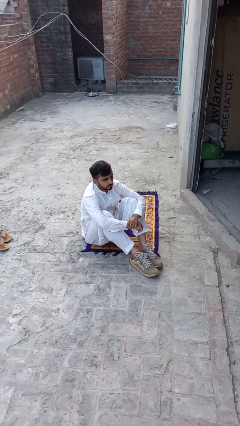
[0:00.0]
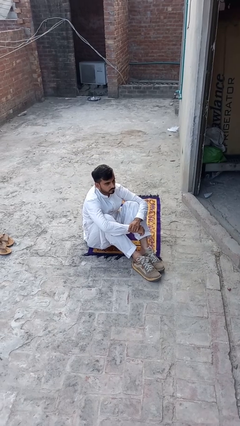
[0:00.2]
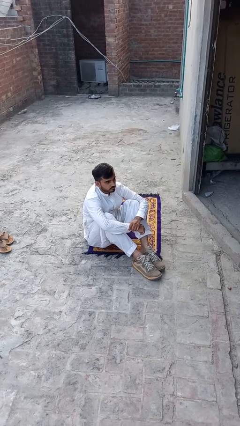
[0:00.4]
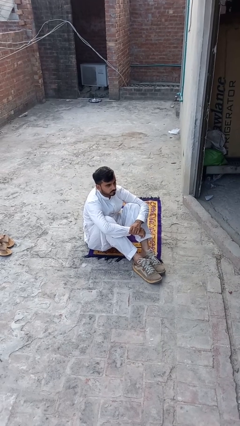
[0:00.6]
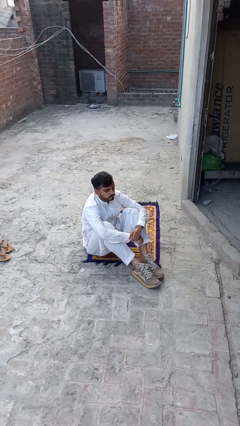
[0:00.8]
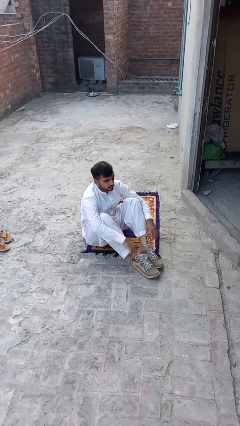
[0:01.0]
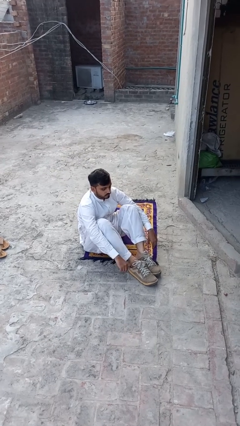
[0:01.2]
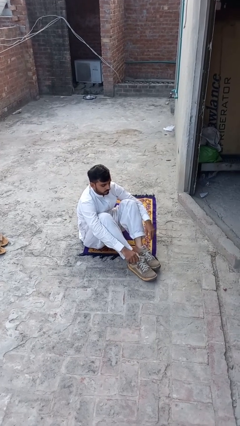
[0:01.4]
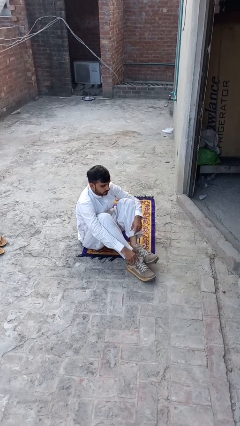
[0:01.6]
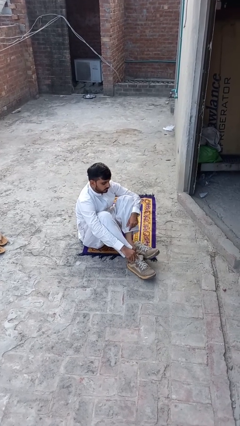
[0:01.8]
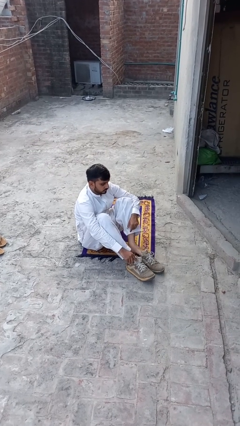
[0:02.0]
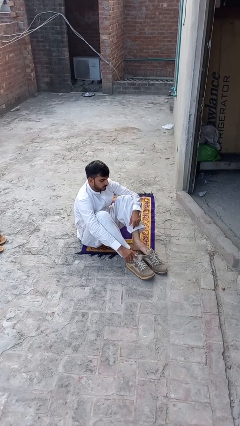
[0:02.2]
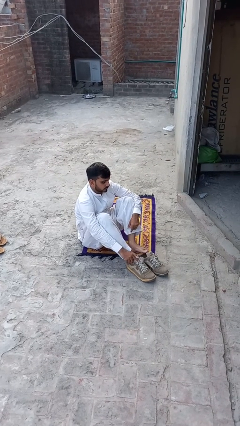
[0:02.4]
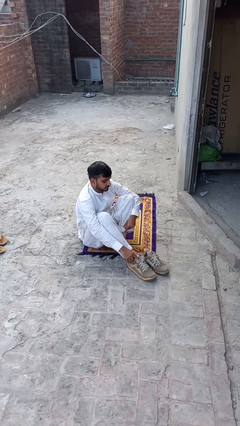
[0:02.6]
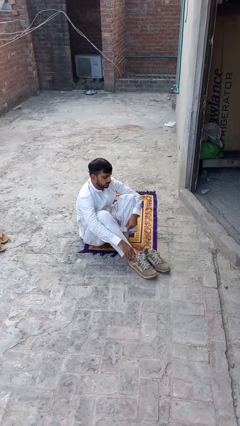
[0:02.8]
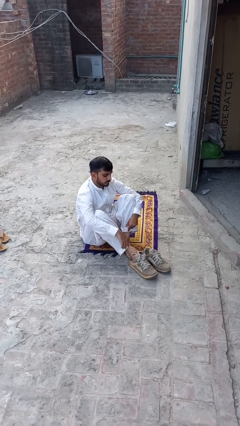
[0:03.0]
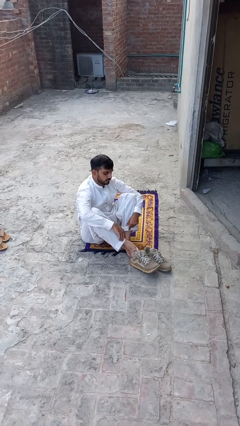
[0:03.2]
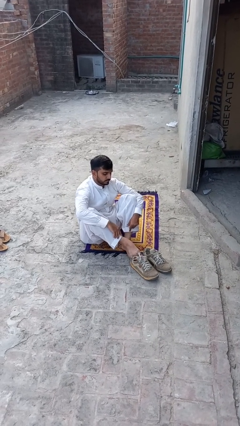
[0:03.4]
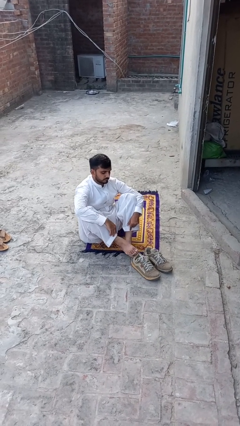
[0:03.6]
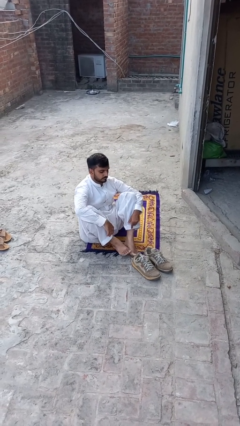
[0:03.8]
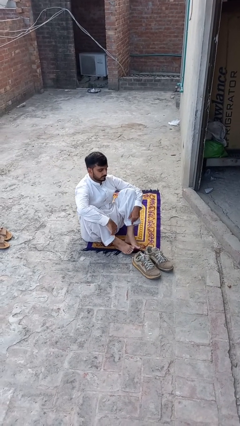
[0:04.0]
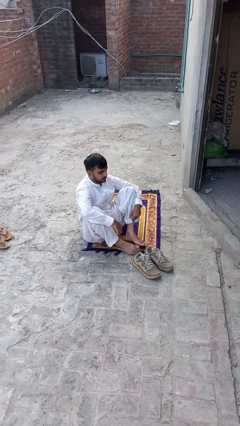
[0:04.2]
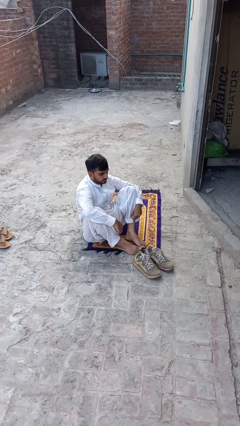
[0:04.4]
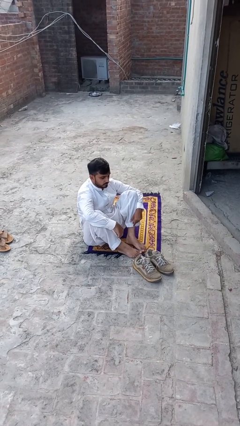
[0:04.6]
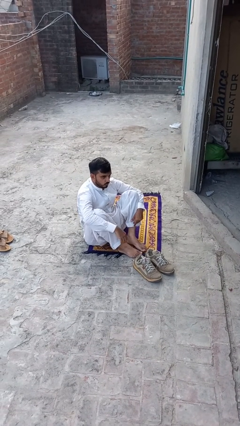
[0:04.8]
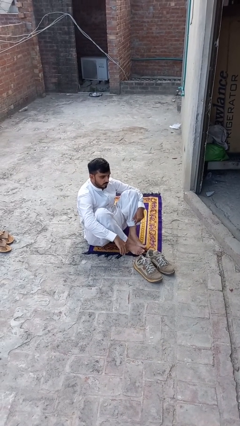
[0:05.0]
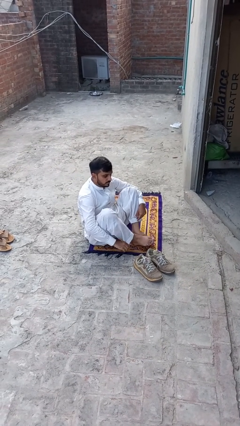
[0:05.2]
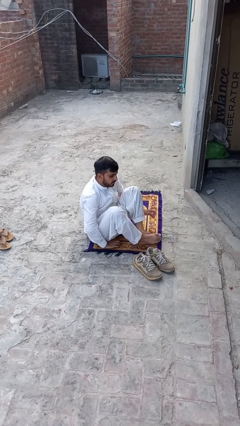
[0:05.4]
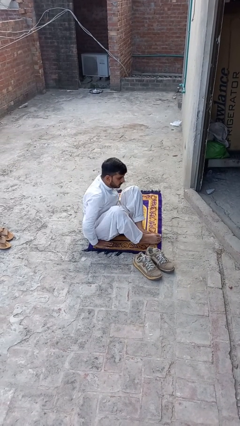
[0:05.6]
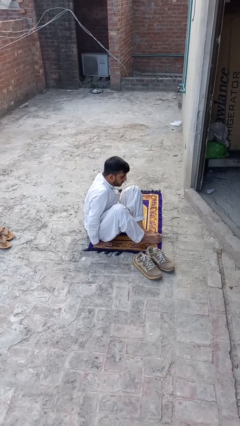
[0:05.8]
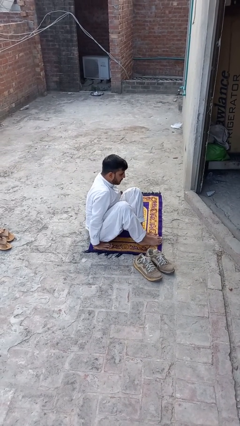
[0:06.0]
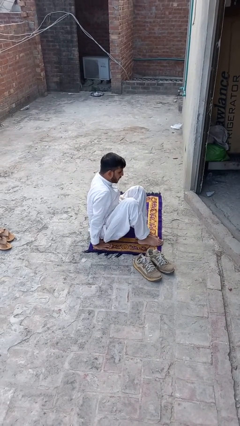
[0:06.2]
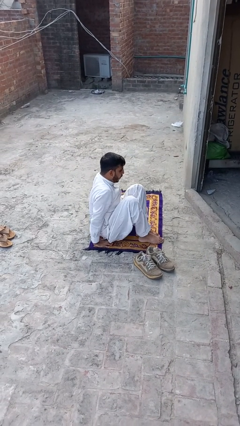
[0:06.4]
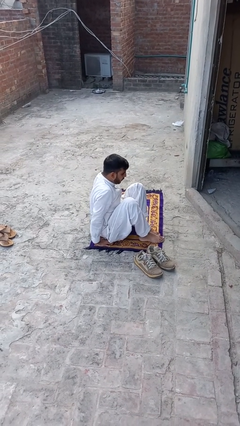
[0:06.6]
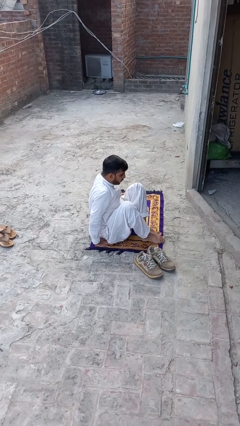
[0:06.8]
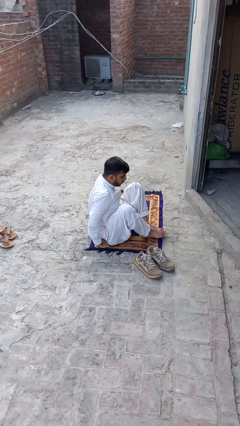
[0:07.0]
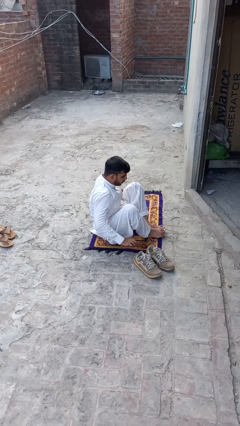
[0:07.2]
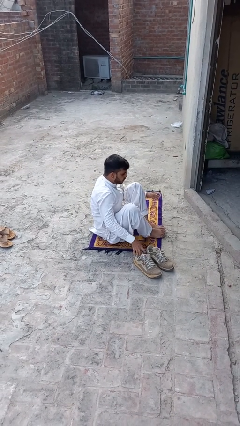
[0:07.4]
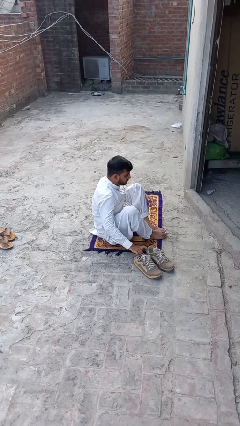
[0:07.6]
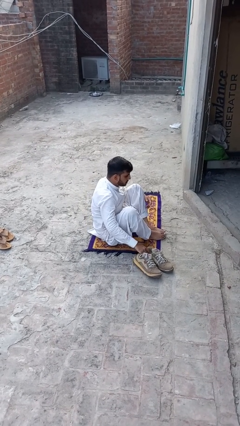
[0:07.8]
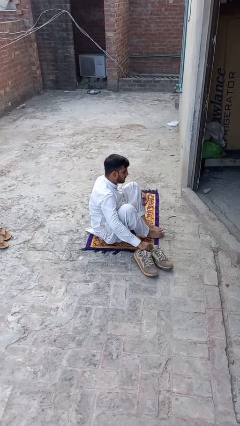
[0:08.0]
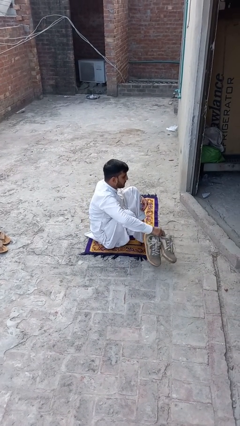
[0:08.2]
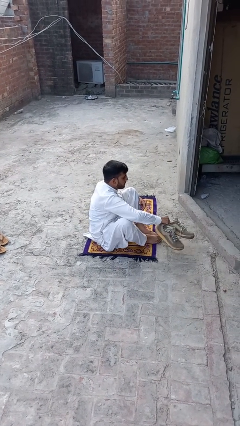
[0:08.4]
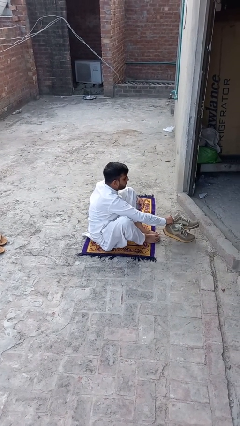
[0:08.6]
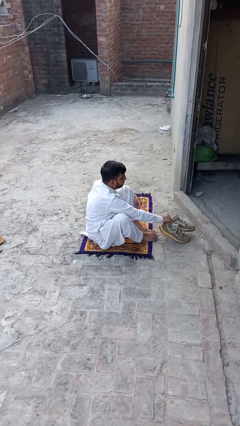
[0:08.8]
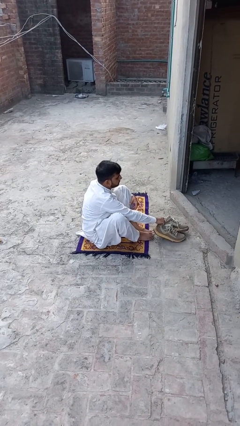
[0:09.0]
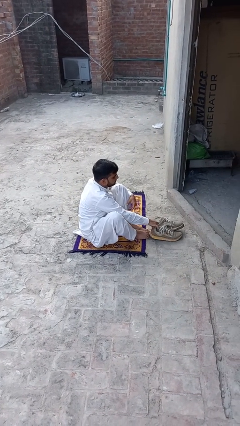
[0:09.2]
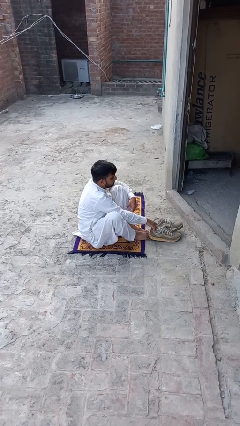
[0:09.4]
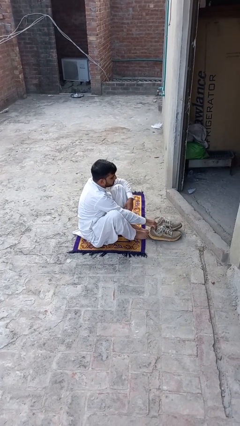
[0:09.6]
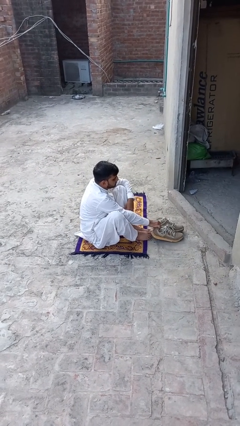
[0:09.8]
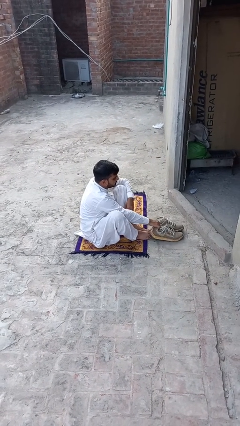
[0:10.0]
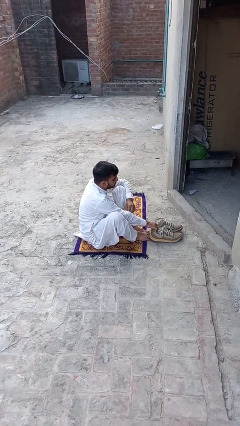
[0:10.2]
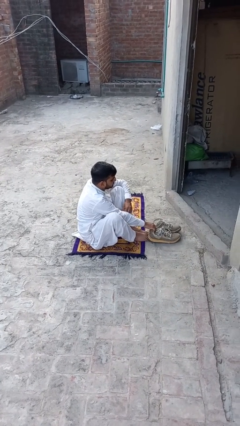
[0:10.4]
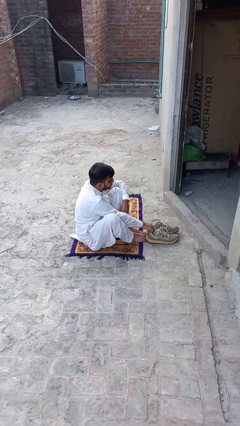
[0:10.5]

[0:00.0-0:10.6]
person takes off shoes

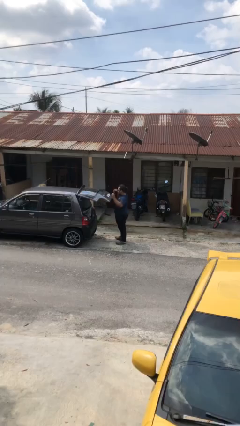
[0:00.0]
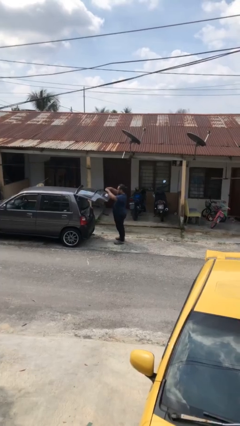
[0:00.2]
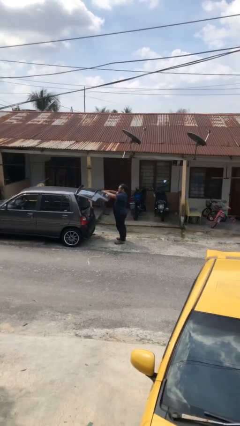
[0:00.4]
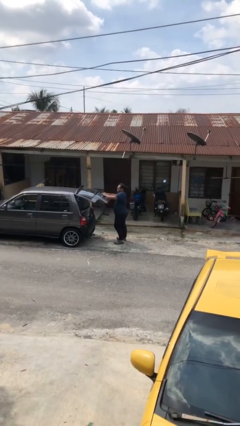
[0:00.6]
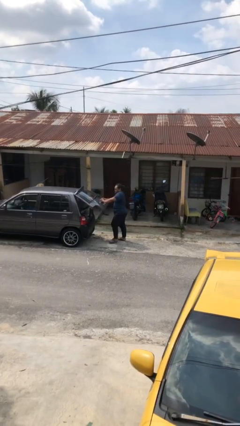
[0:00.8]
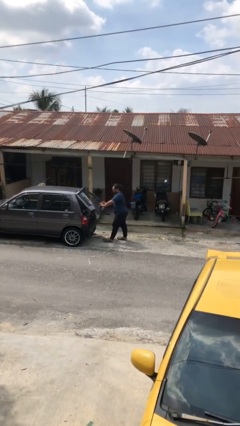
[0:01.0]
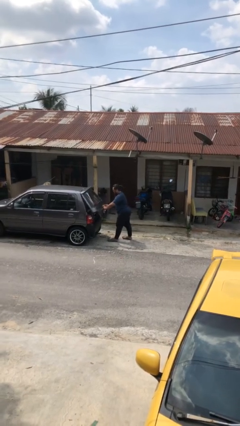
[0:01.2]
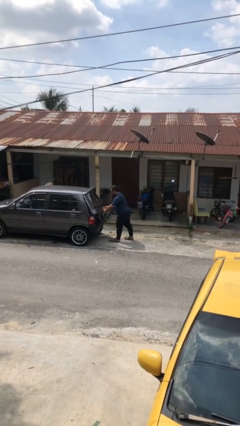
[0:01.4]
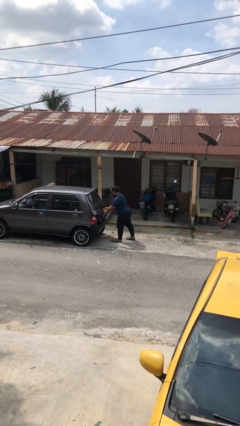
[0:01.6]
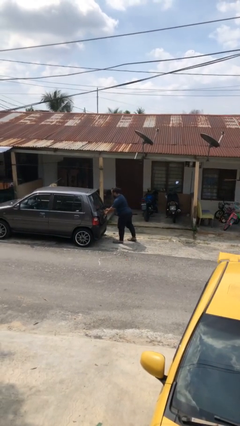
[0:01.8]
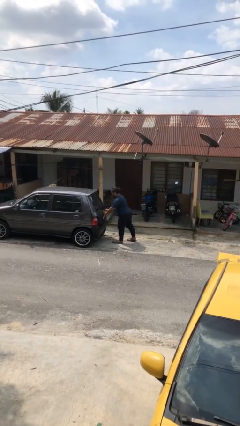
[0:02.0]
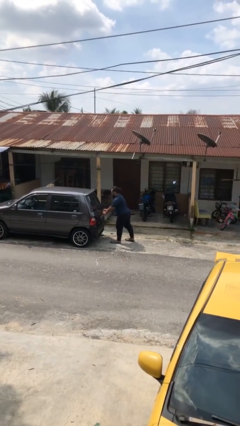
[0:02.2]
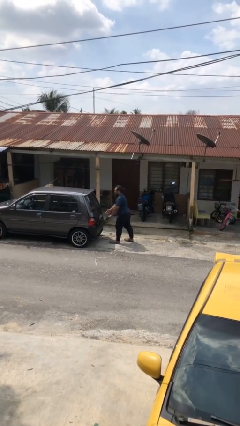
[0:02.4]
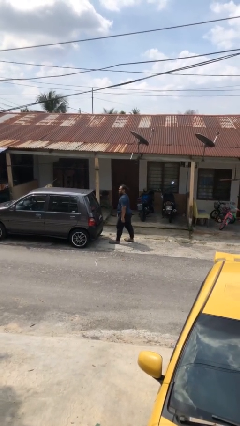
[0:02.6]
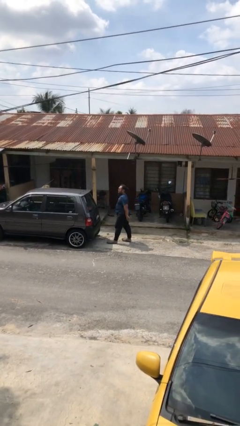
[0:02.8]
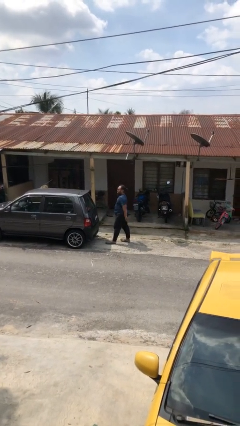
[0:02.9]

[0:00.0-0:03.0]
person closes car trunk

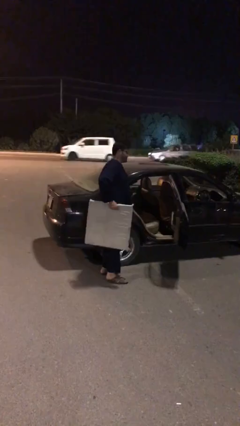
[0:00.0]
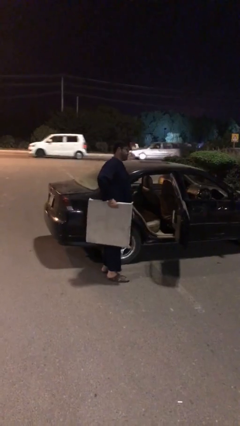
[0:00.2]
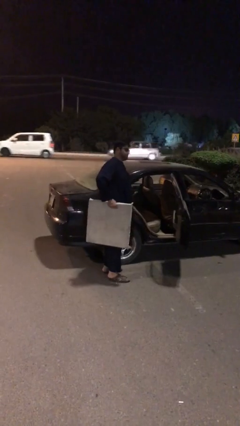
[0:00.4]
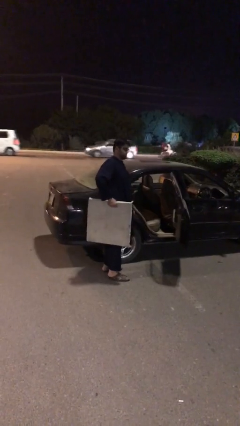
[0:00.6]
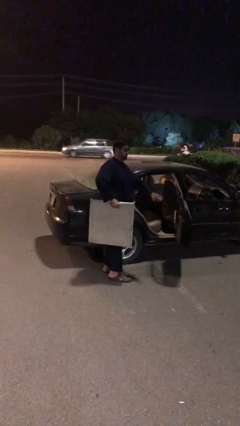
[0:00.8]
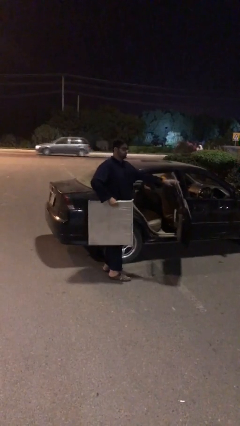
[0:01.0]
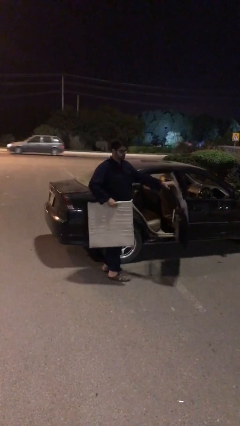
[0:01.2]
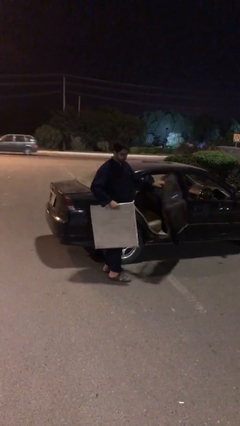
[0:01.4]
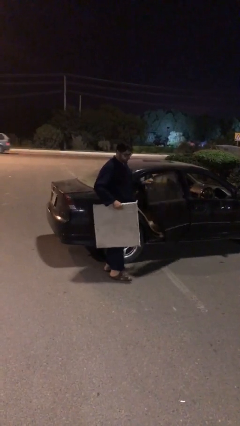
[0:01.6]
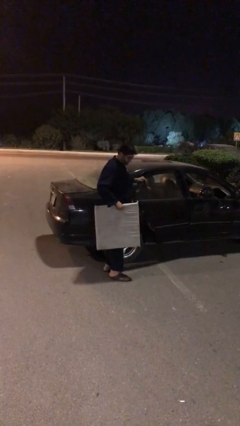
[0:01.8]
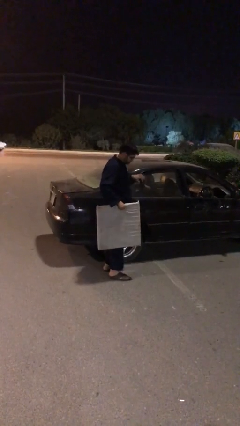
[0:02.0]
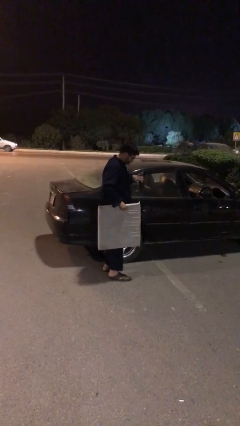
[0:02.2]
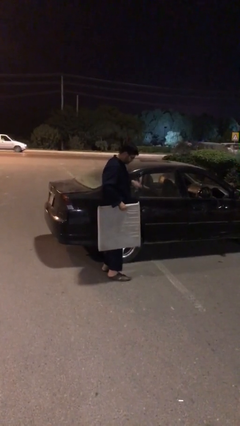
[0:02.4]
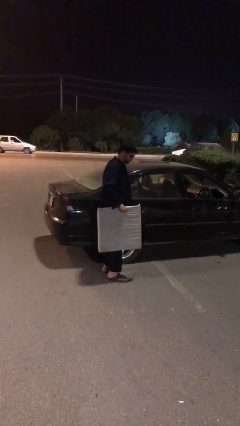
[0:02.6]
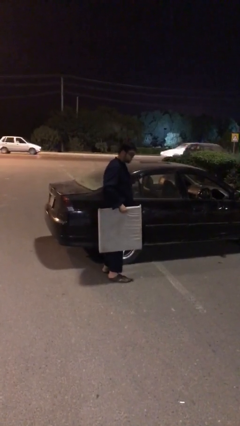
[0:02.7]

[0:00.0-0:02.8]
person closes car door

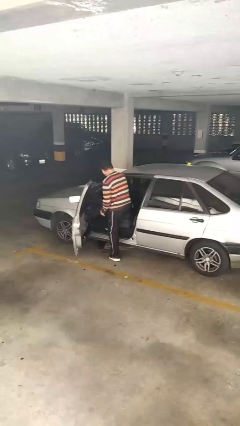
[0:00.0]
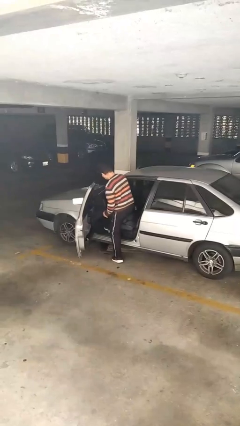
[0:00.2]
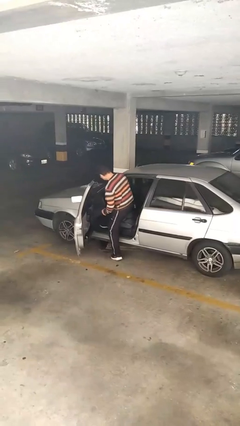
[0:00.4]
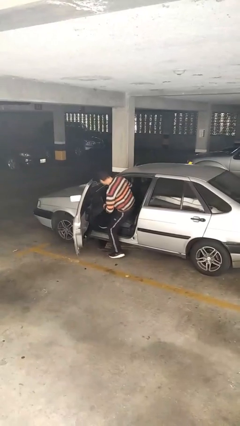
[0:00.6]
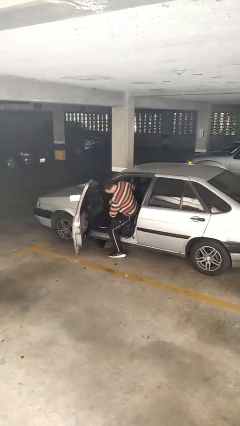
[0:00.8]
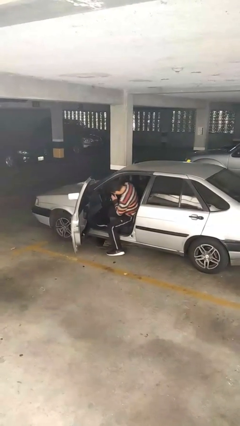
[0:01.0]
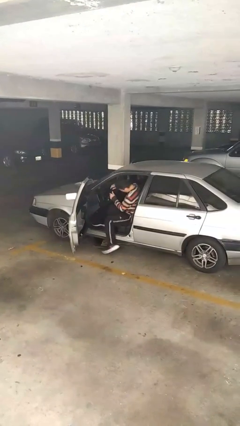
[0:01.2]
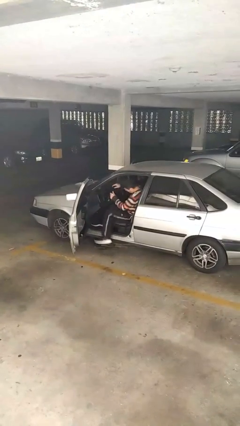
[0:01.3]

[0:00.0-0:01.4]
person enters car
